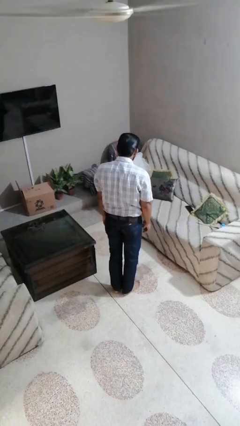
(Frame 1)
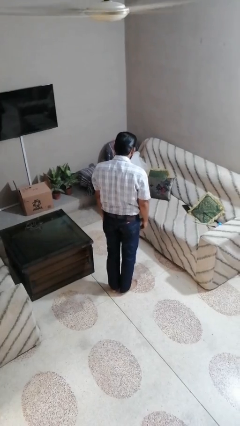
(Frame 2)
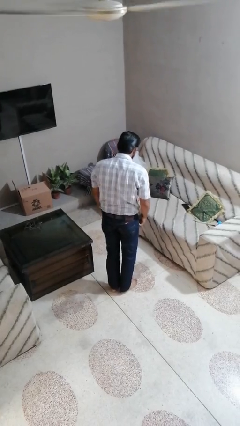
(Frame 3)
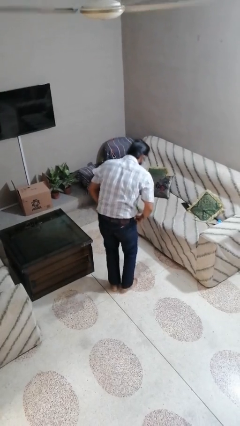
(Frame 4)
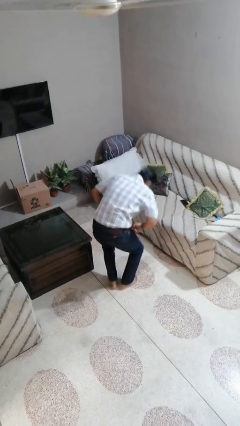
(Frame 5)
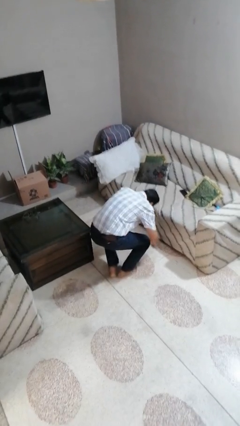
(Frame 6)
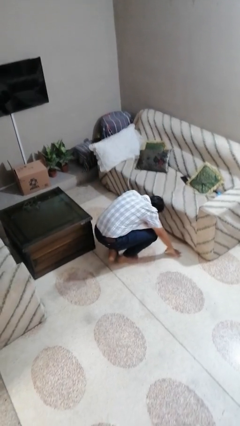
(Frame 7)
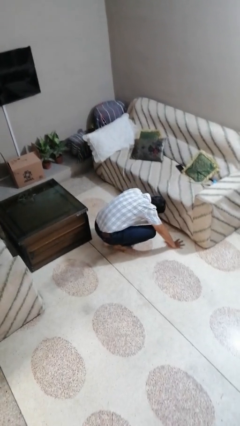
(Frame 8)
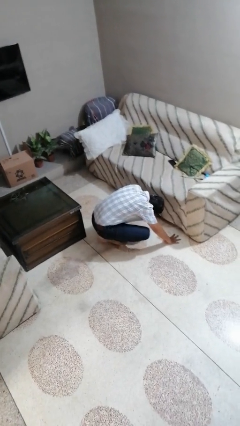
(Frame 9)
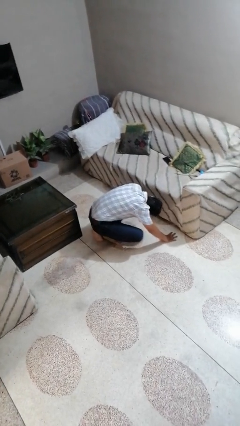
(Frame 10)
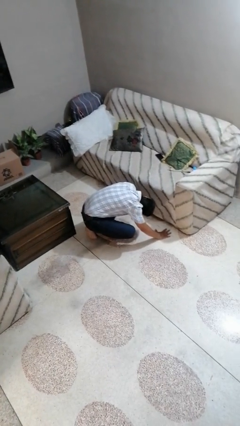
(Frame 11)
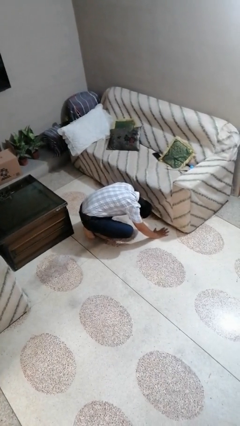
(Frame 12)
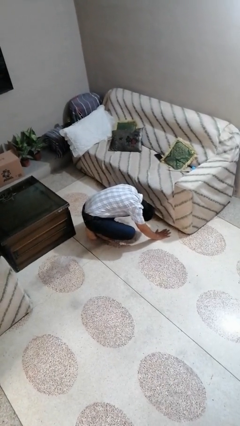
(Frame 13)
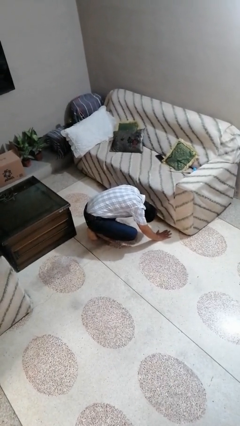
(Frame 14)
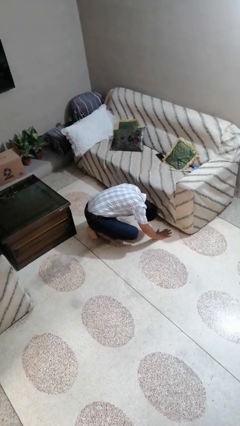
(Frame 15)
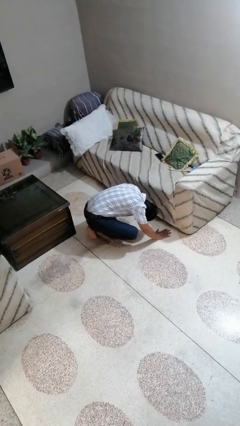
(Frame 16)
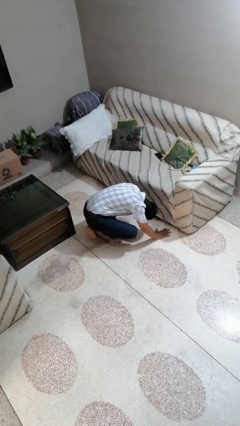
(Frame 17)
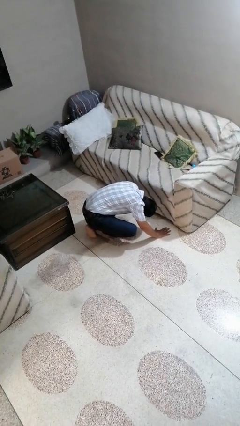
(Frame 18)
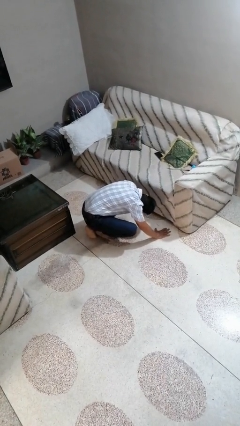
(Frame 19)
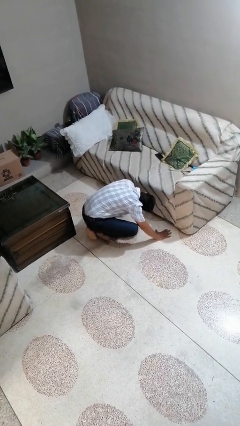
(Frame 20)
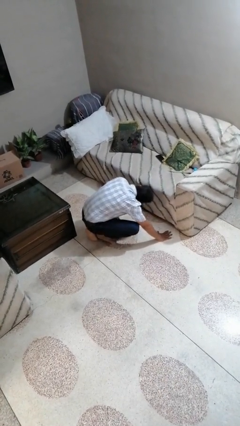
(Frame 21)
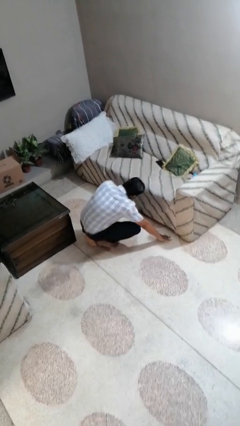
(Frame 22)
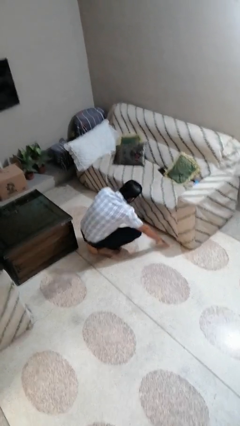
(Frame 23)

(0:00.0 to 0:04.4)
person searches under couch

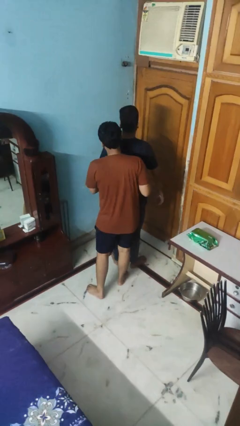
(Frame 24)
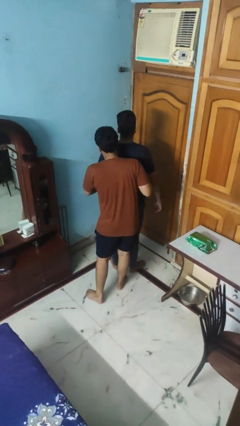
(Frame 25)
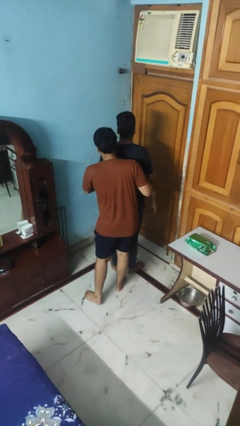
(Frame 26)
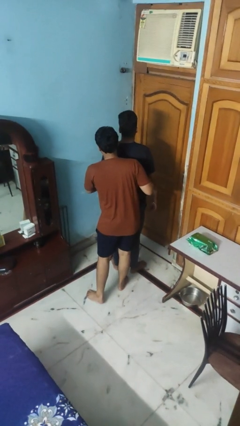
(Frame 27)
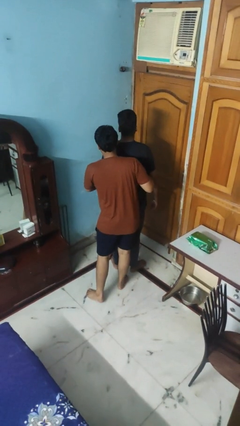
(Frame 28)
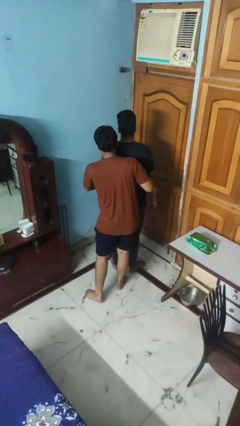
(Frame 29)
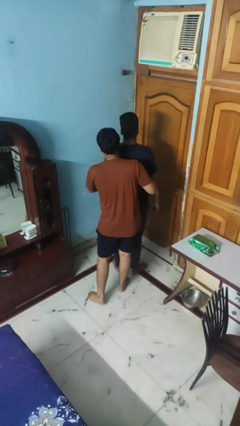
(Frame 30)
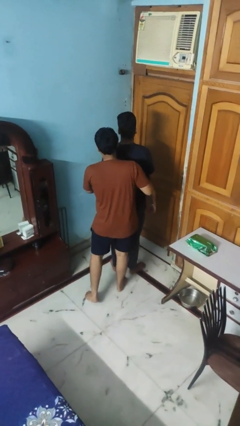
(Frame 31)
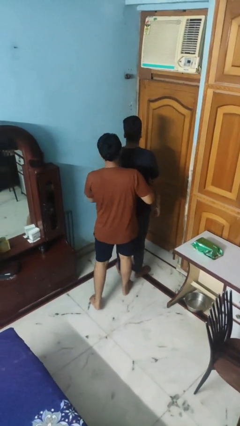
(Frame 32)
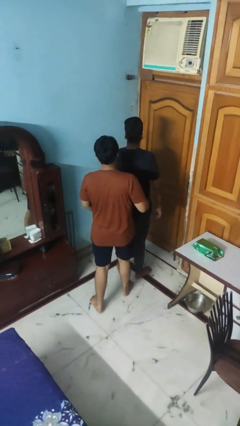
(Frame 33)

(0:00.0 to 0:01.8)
person hugs person from behind

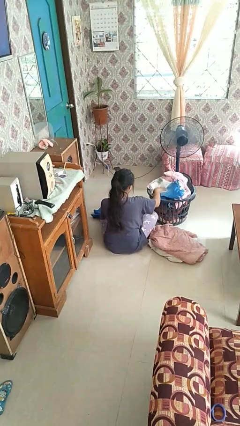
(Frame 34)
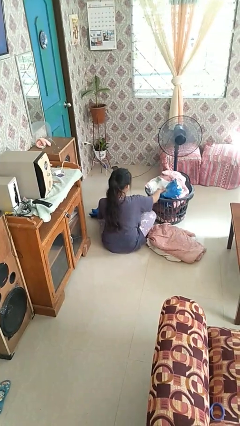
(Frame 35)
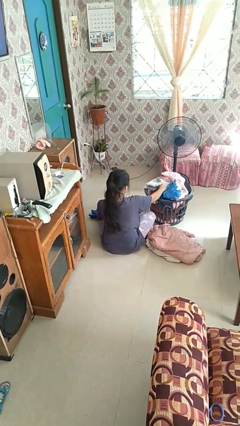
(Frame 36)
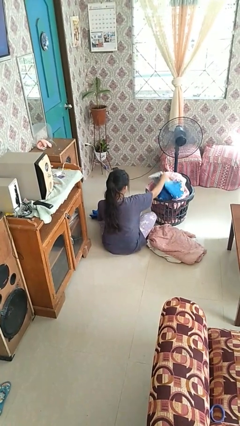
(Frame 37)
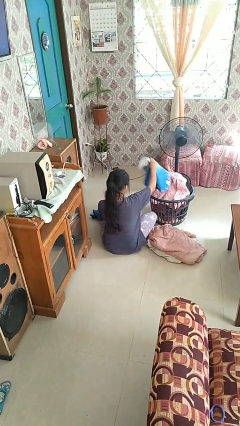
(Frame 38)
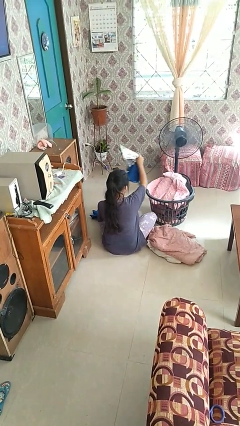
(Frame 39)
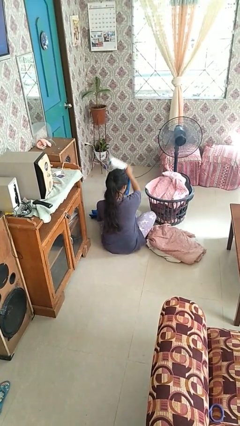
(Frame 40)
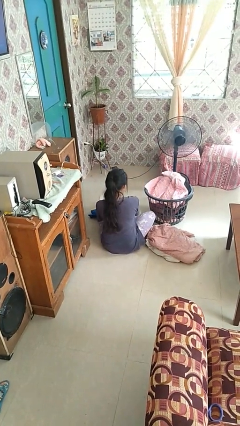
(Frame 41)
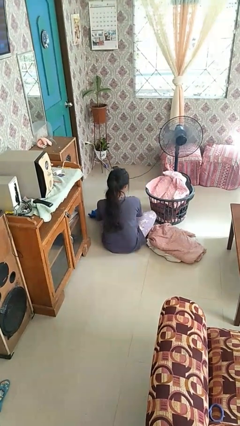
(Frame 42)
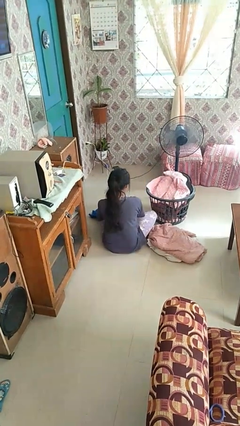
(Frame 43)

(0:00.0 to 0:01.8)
person takes object from basket

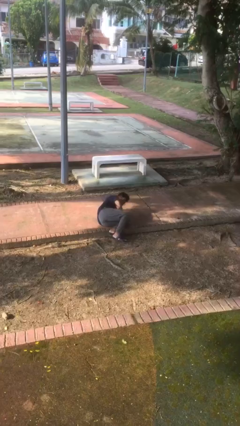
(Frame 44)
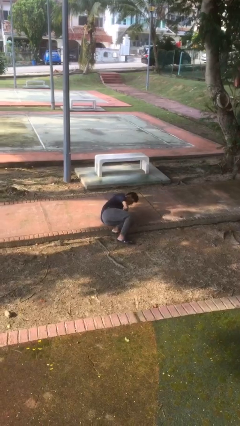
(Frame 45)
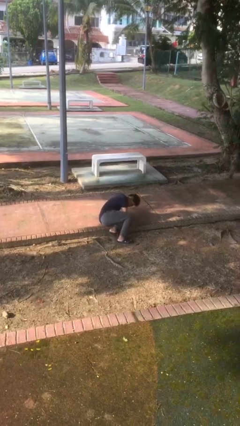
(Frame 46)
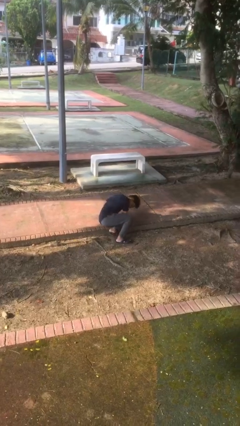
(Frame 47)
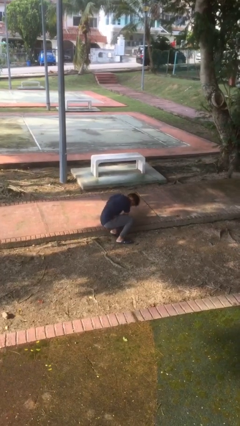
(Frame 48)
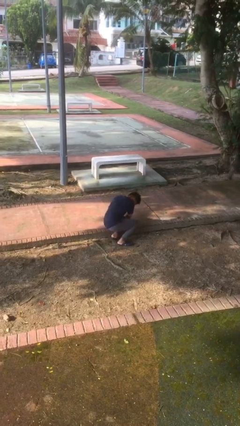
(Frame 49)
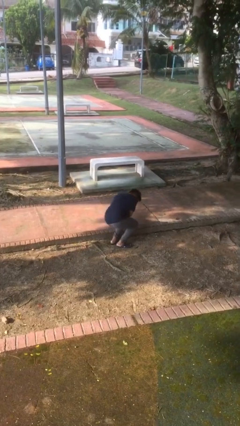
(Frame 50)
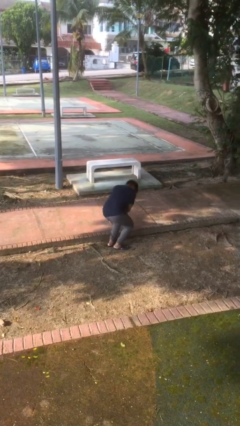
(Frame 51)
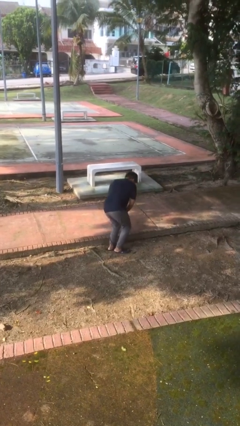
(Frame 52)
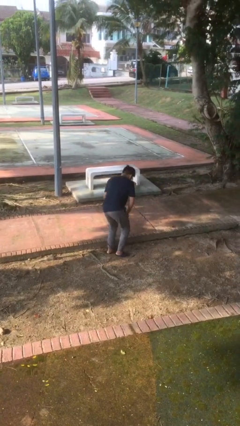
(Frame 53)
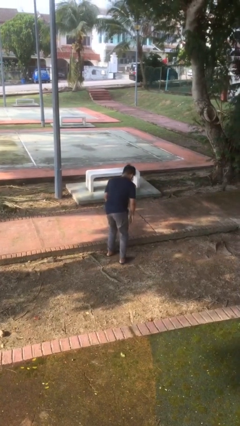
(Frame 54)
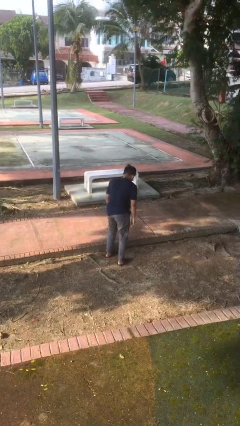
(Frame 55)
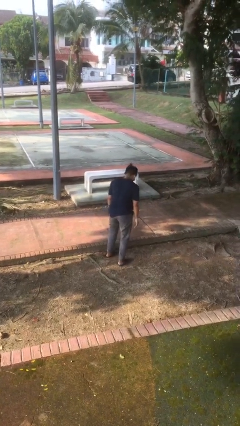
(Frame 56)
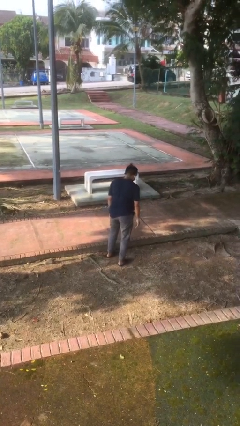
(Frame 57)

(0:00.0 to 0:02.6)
person stands up from floor

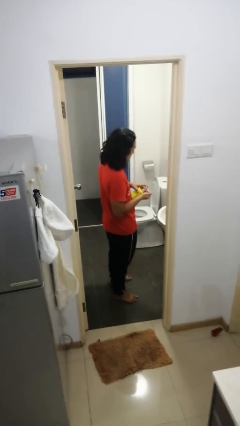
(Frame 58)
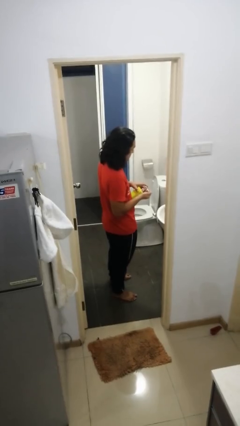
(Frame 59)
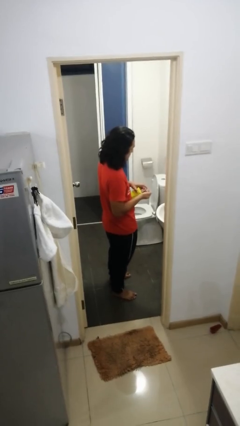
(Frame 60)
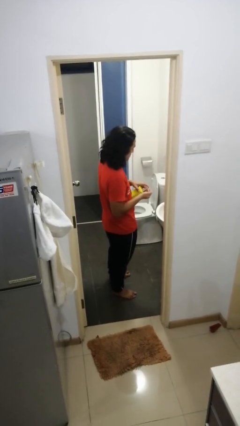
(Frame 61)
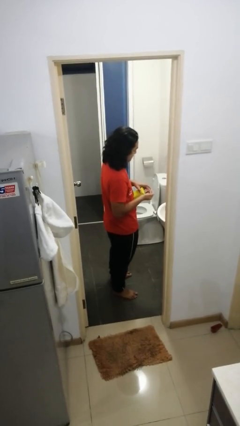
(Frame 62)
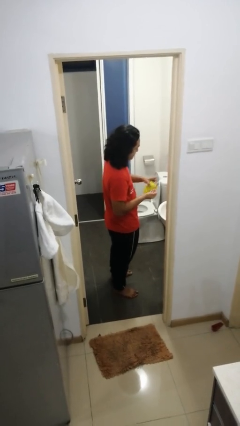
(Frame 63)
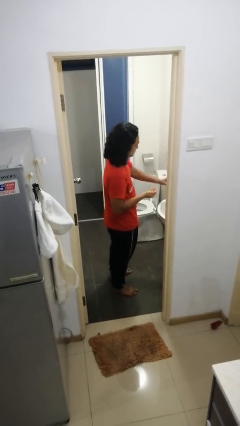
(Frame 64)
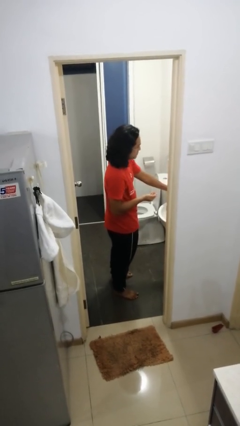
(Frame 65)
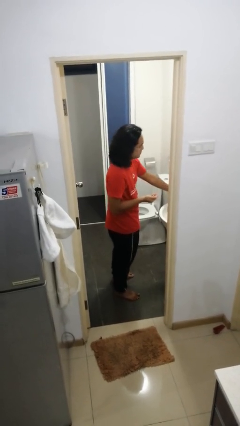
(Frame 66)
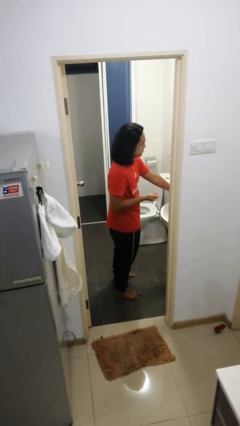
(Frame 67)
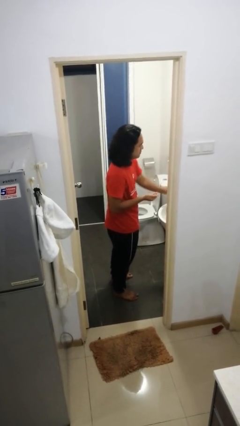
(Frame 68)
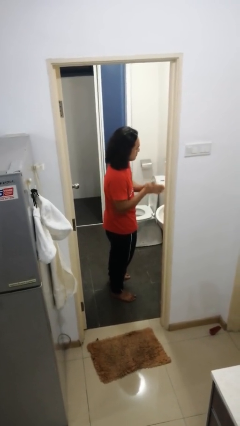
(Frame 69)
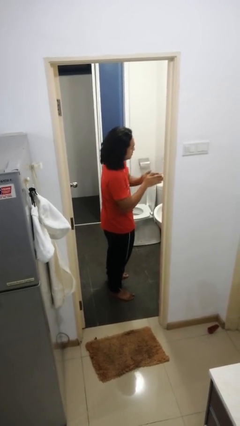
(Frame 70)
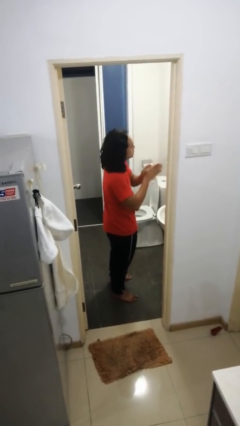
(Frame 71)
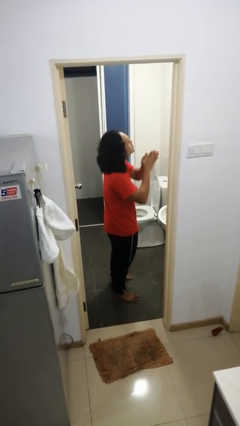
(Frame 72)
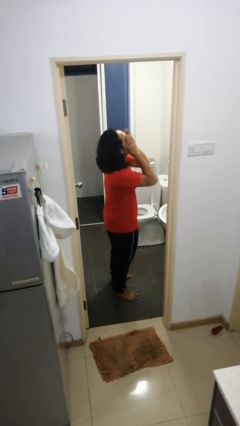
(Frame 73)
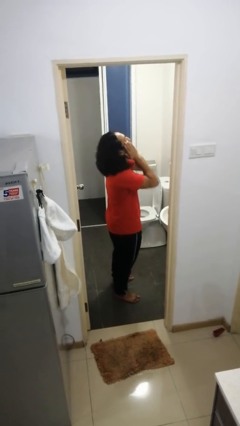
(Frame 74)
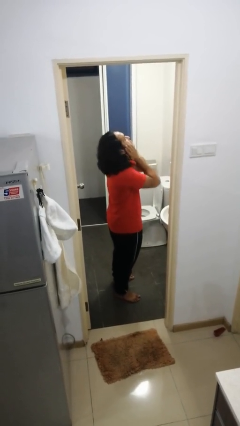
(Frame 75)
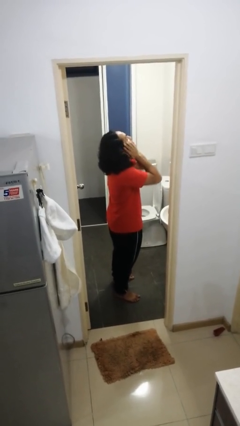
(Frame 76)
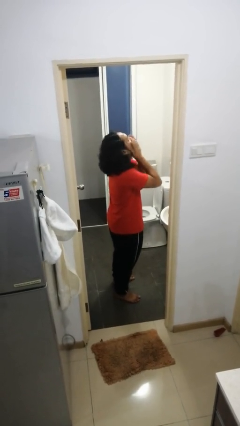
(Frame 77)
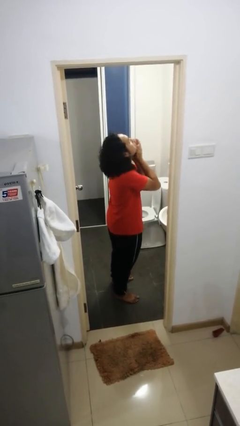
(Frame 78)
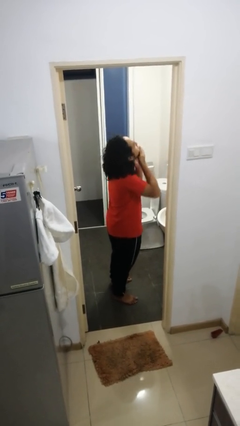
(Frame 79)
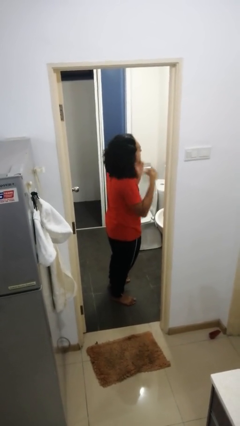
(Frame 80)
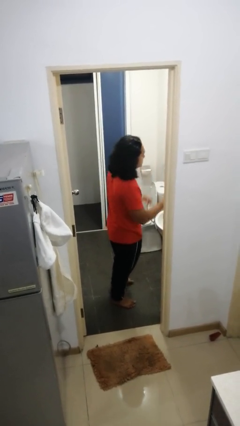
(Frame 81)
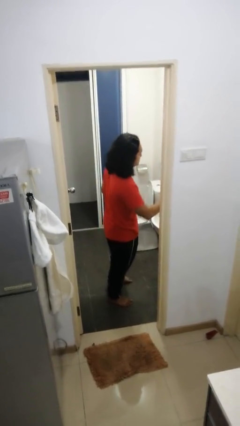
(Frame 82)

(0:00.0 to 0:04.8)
person applies shaving cream

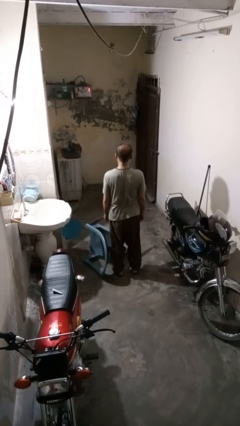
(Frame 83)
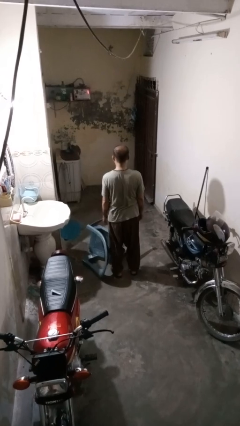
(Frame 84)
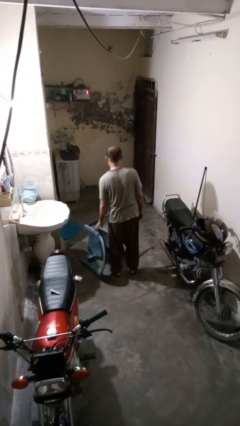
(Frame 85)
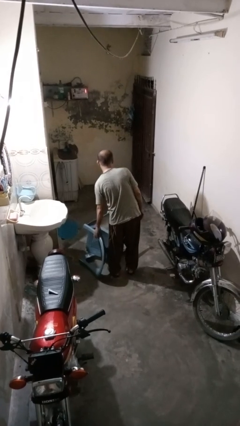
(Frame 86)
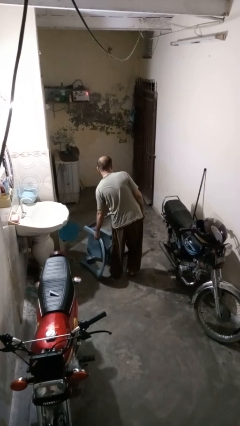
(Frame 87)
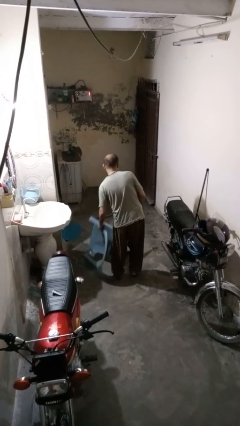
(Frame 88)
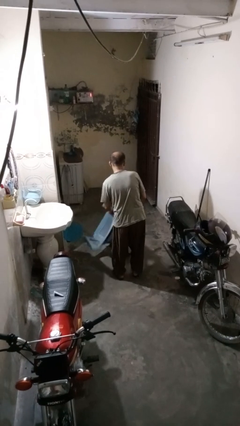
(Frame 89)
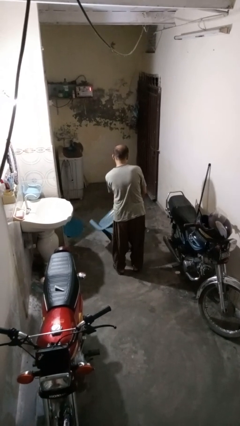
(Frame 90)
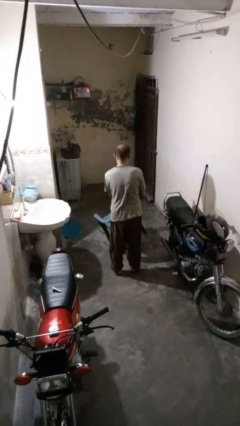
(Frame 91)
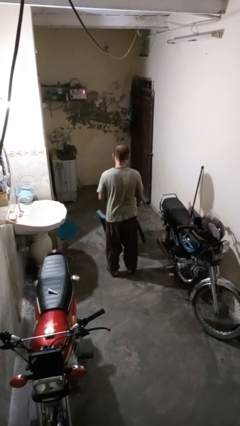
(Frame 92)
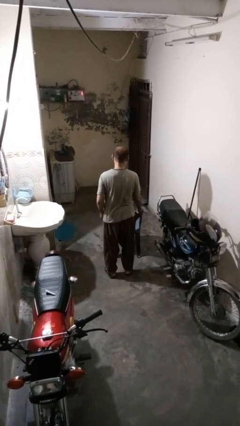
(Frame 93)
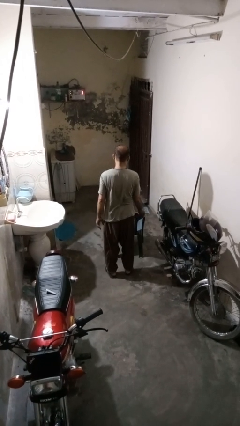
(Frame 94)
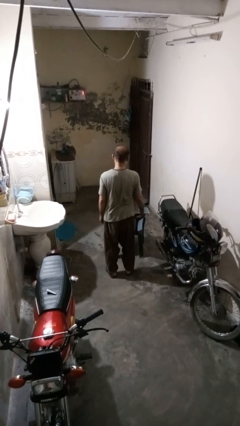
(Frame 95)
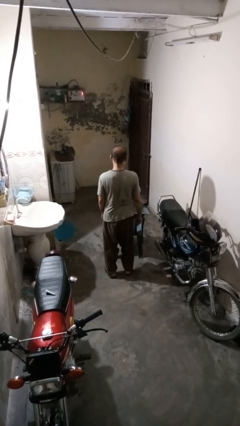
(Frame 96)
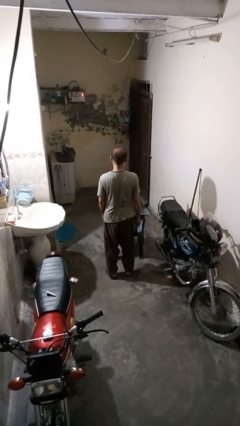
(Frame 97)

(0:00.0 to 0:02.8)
person sets upright furniture
